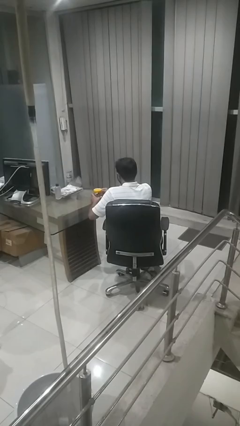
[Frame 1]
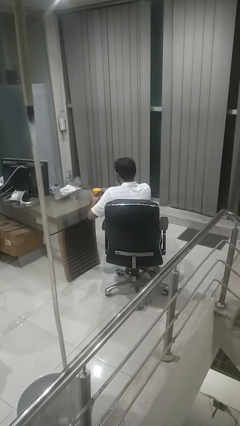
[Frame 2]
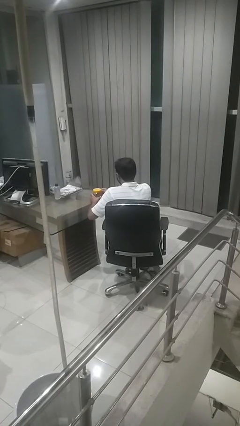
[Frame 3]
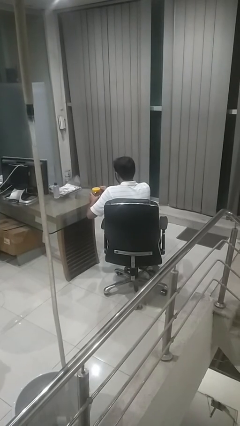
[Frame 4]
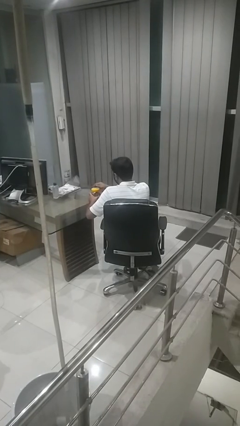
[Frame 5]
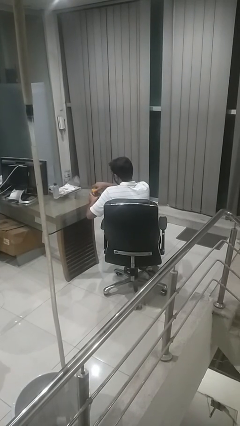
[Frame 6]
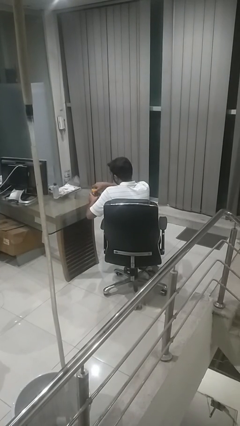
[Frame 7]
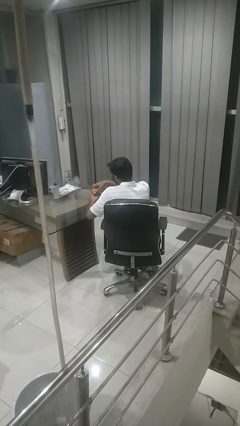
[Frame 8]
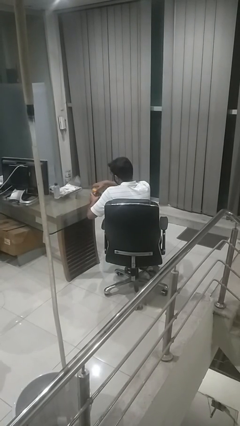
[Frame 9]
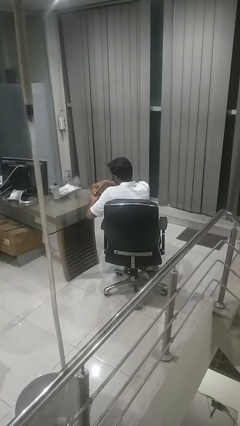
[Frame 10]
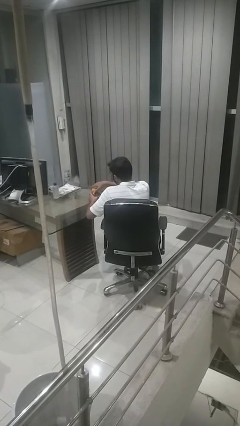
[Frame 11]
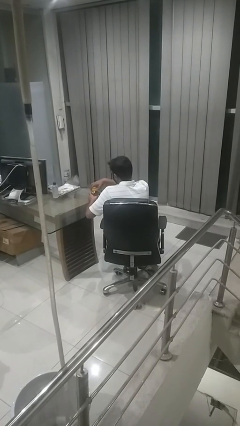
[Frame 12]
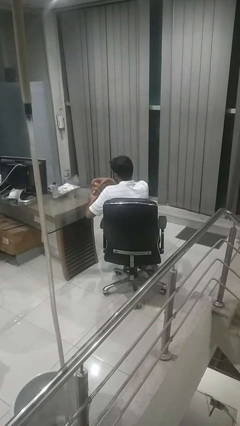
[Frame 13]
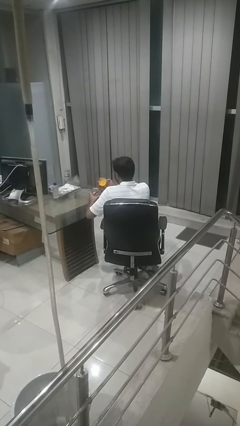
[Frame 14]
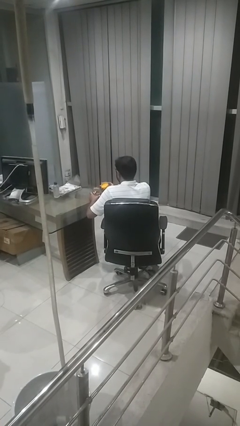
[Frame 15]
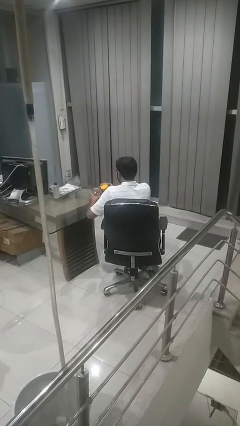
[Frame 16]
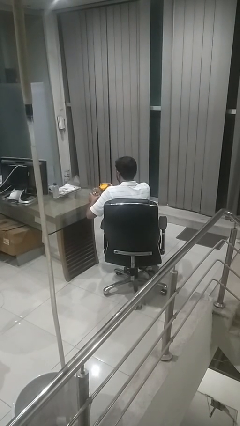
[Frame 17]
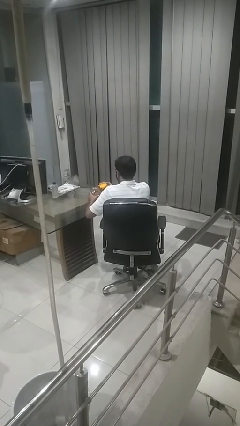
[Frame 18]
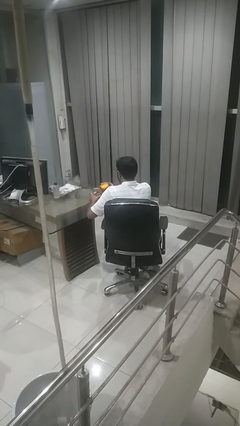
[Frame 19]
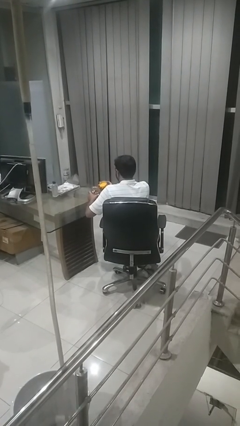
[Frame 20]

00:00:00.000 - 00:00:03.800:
person opens jar

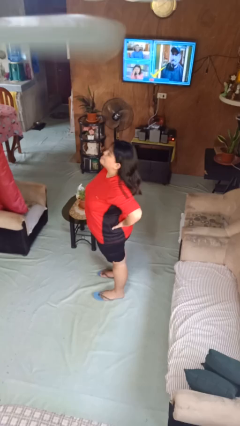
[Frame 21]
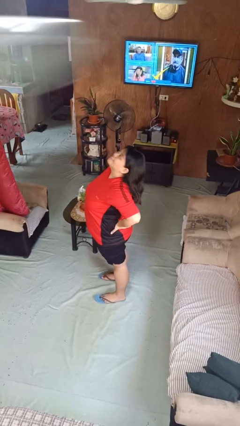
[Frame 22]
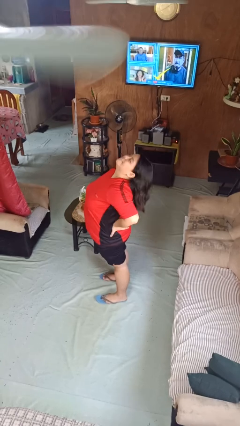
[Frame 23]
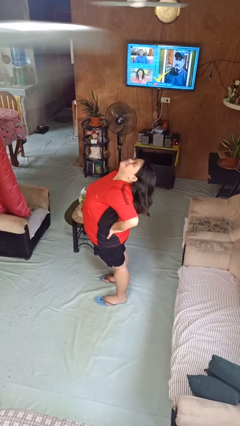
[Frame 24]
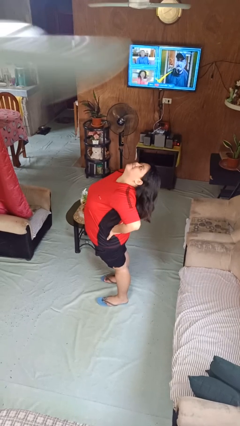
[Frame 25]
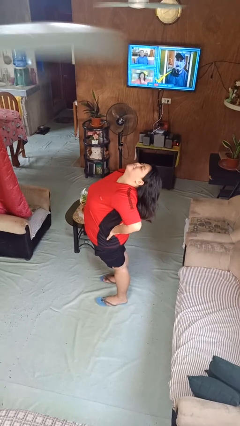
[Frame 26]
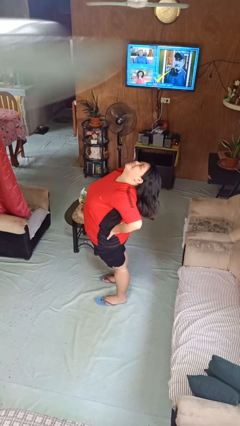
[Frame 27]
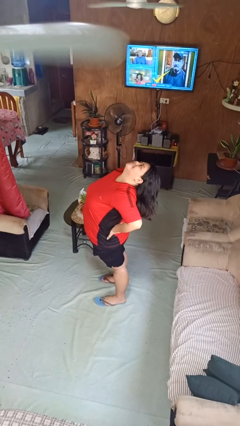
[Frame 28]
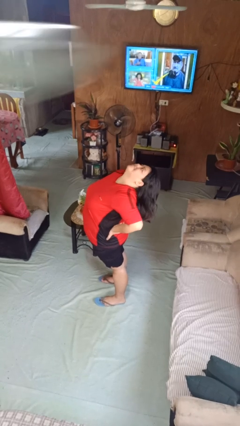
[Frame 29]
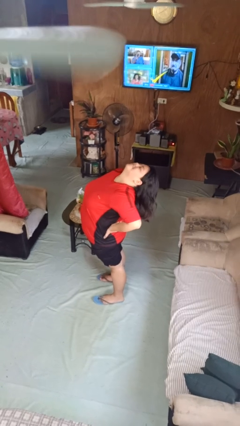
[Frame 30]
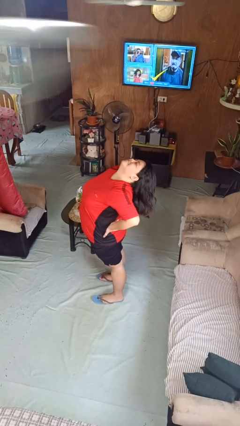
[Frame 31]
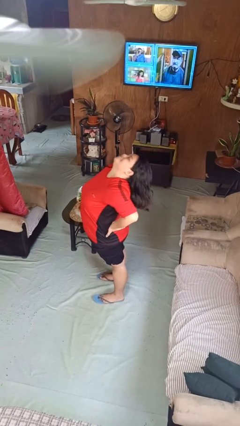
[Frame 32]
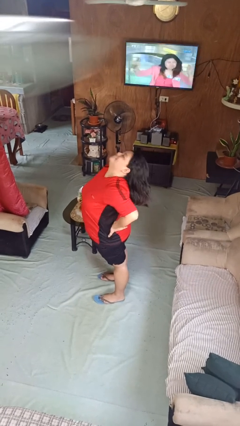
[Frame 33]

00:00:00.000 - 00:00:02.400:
person stretches back

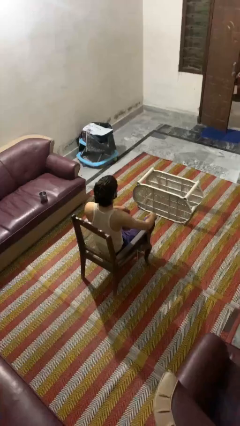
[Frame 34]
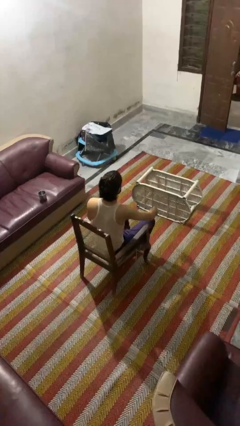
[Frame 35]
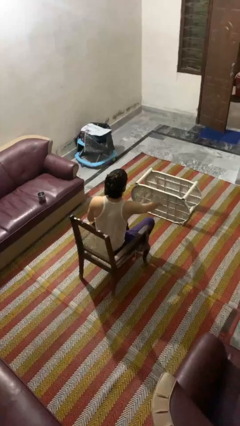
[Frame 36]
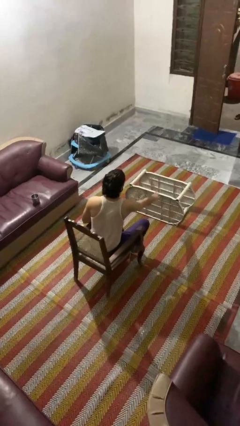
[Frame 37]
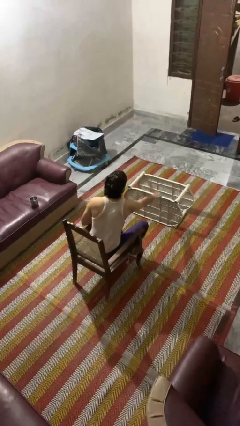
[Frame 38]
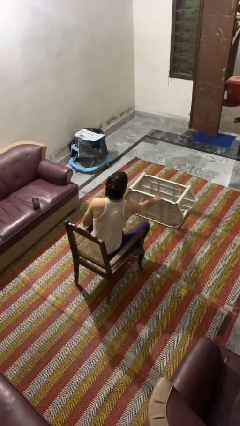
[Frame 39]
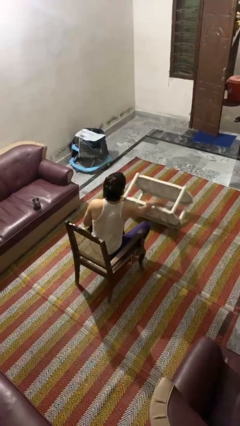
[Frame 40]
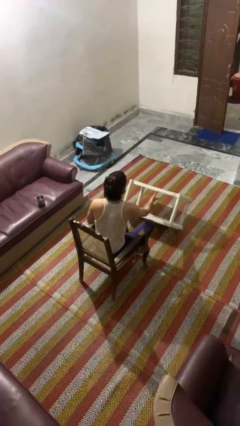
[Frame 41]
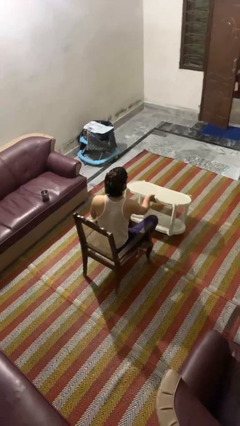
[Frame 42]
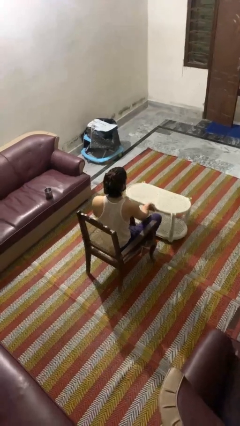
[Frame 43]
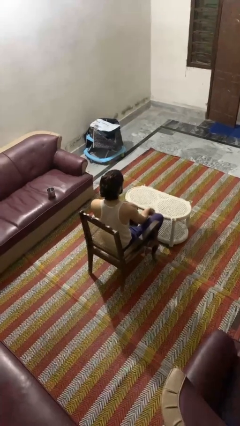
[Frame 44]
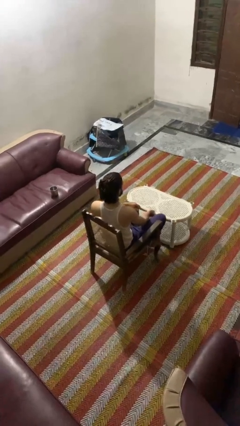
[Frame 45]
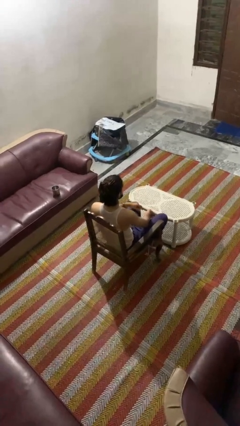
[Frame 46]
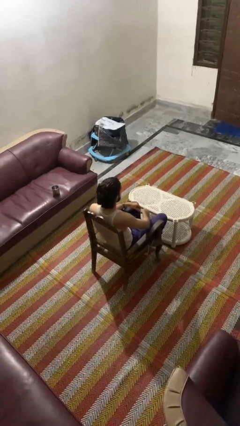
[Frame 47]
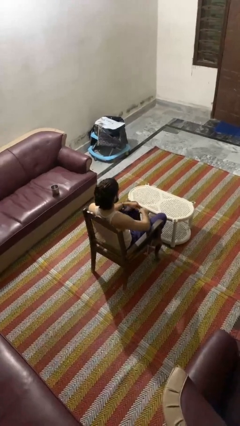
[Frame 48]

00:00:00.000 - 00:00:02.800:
person sets upright furniture

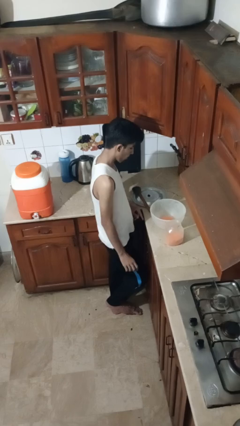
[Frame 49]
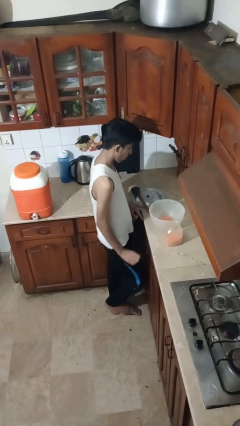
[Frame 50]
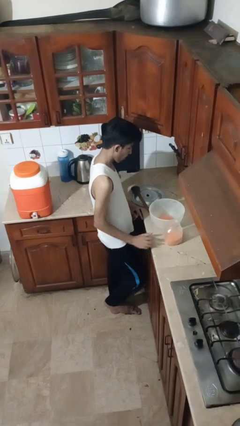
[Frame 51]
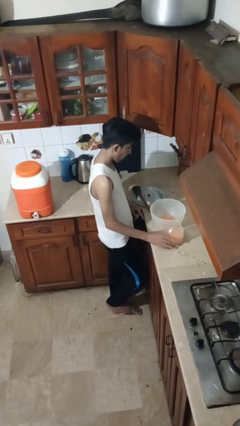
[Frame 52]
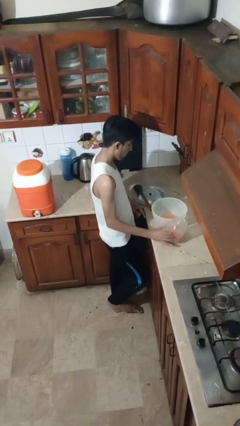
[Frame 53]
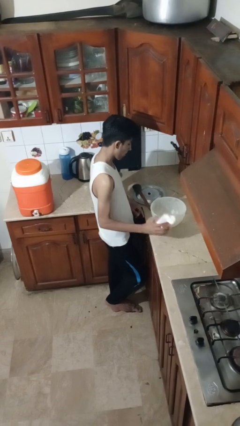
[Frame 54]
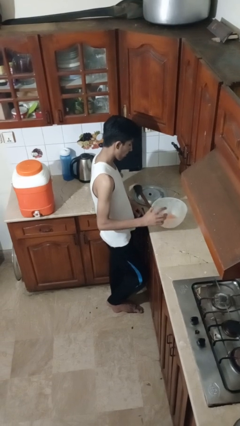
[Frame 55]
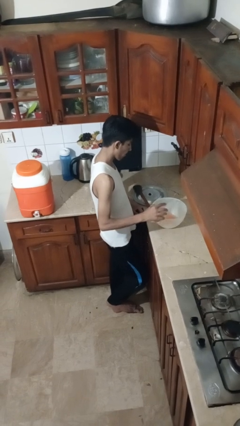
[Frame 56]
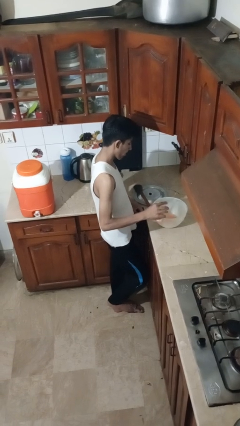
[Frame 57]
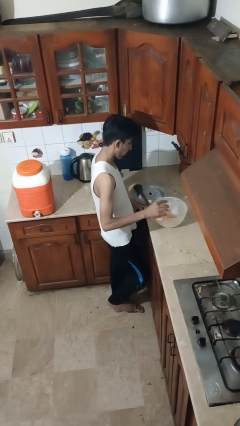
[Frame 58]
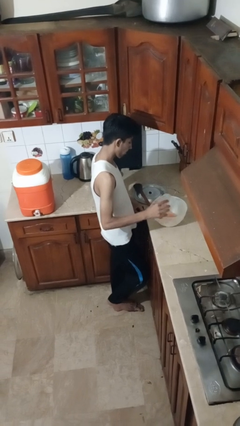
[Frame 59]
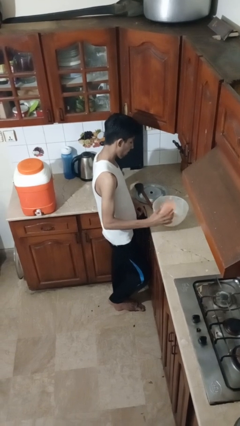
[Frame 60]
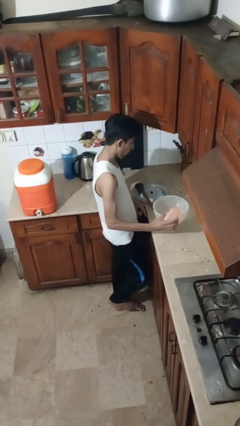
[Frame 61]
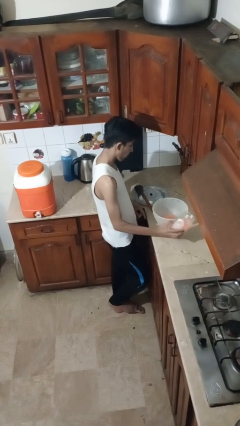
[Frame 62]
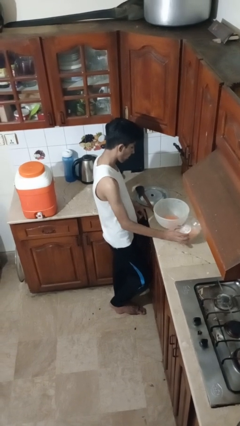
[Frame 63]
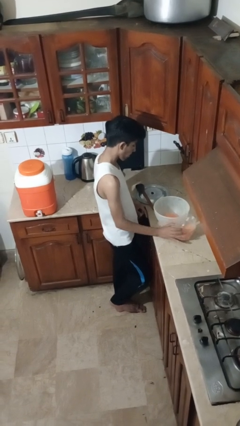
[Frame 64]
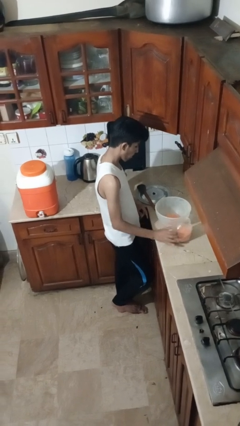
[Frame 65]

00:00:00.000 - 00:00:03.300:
person pours into bowl

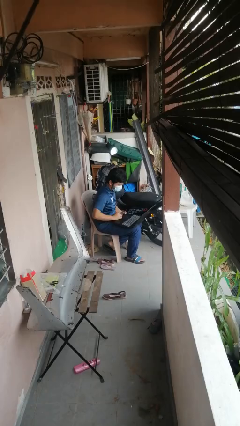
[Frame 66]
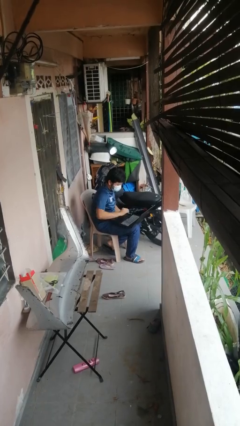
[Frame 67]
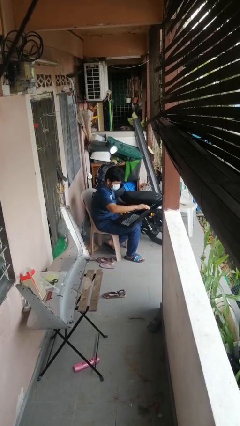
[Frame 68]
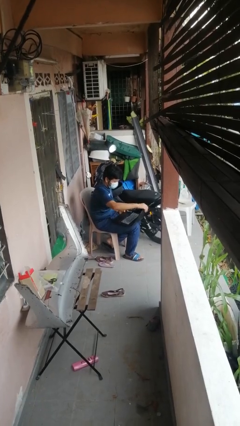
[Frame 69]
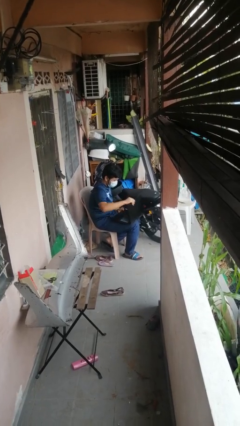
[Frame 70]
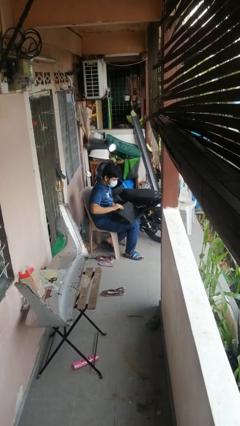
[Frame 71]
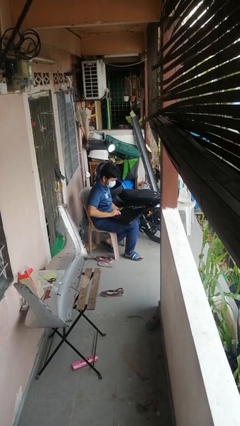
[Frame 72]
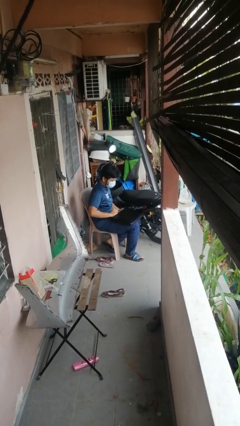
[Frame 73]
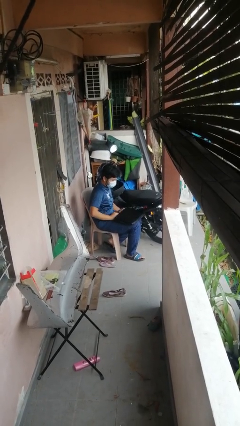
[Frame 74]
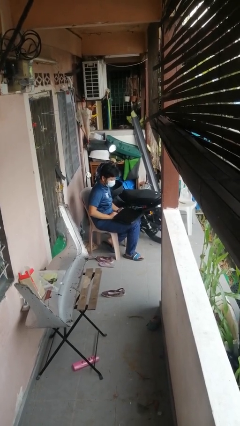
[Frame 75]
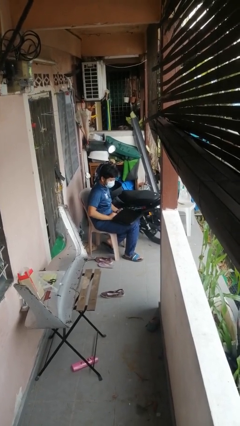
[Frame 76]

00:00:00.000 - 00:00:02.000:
person closes laptop

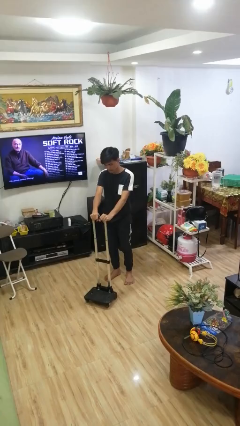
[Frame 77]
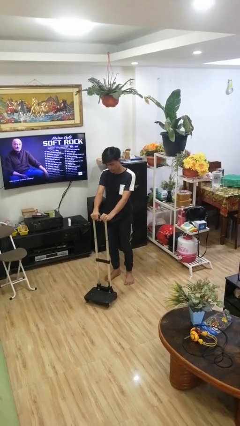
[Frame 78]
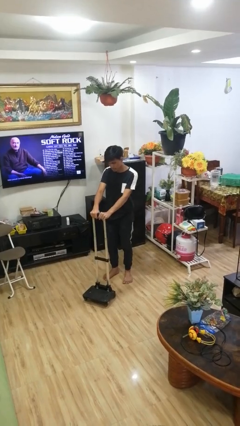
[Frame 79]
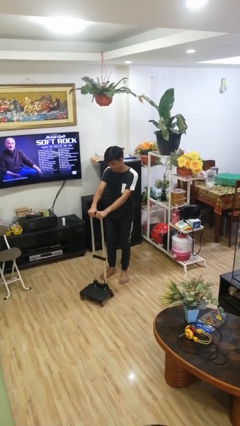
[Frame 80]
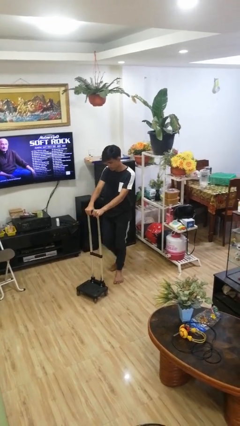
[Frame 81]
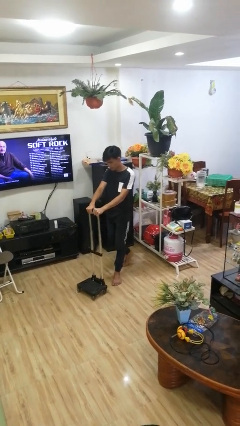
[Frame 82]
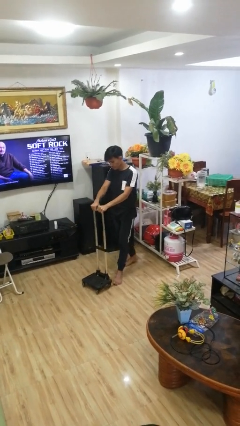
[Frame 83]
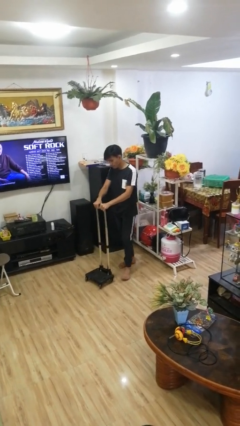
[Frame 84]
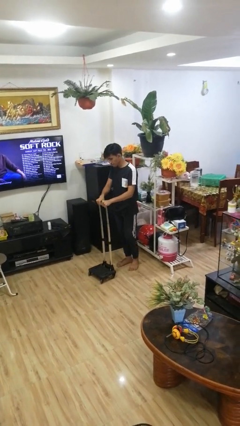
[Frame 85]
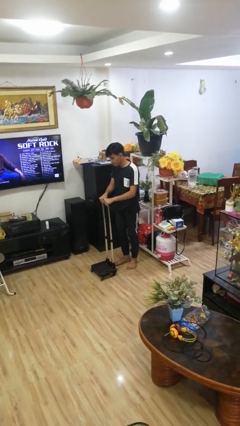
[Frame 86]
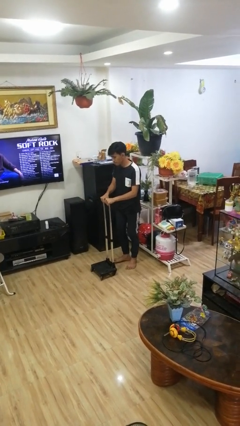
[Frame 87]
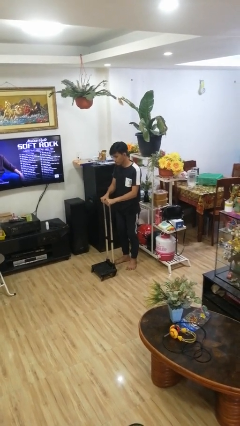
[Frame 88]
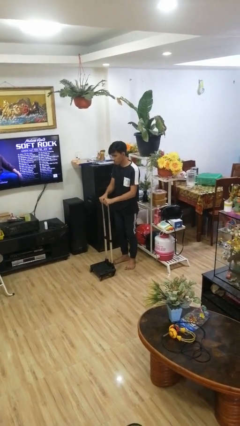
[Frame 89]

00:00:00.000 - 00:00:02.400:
person pulls wheeled cart

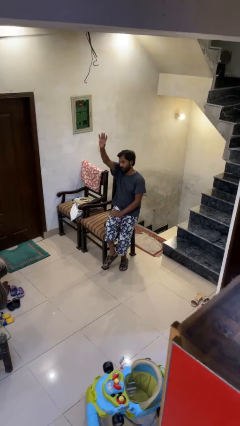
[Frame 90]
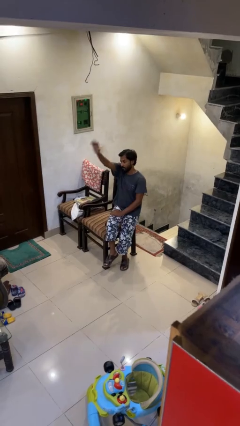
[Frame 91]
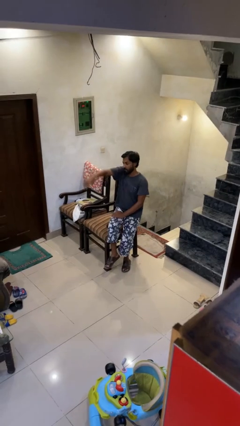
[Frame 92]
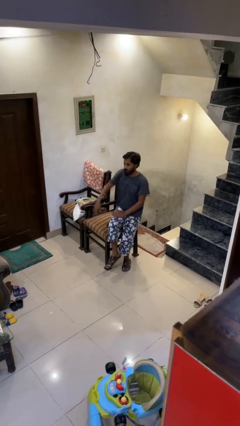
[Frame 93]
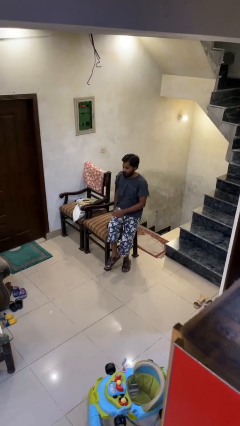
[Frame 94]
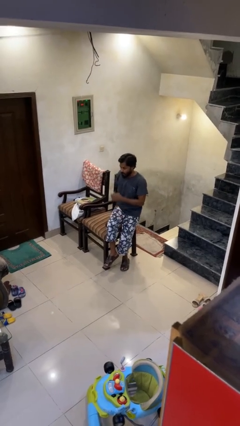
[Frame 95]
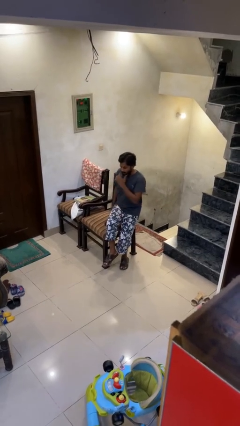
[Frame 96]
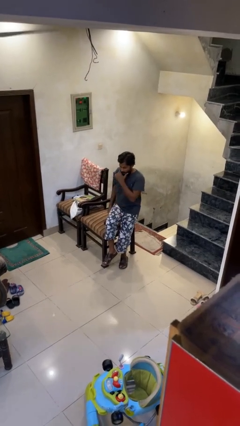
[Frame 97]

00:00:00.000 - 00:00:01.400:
person gestures lower hand
